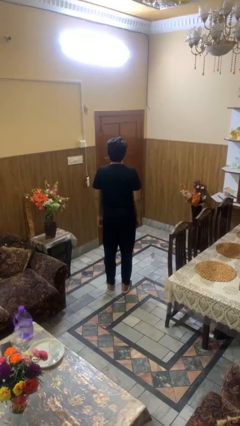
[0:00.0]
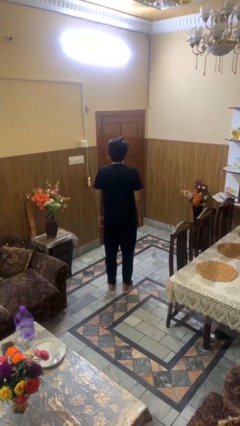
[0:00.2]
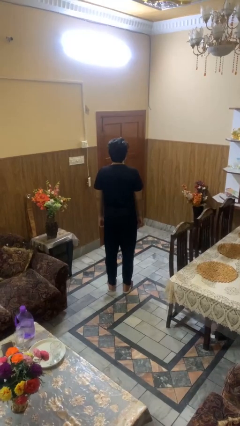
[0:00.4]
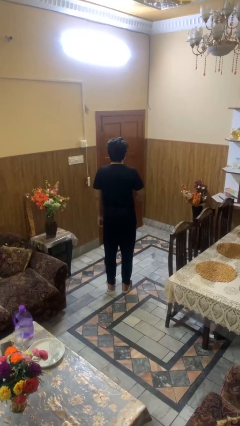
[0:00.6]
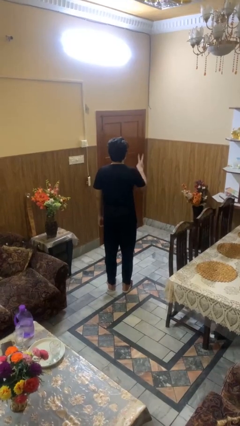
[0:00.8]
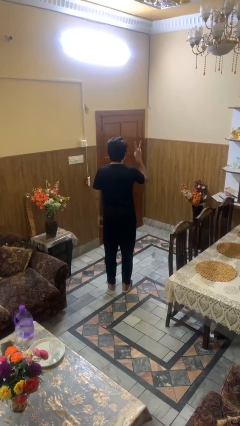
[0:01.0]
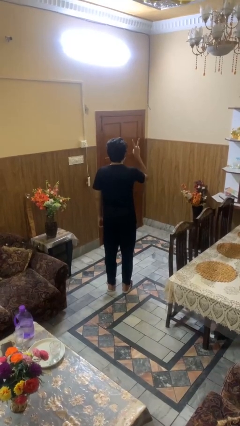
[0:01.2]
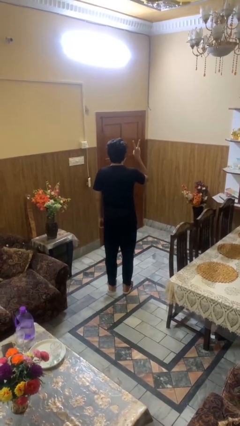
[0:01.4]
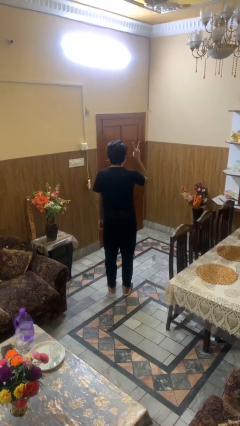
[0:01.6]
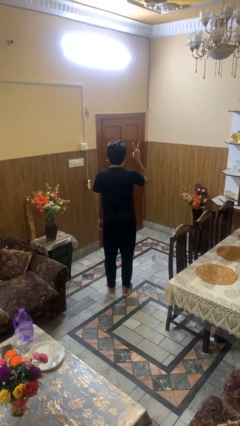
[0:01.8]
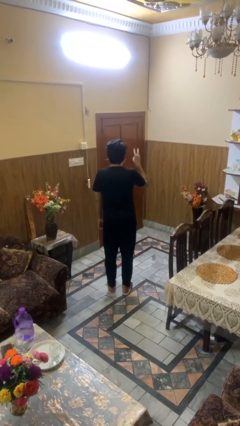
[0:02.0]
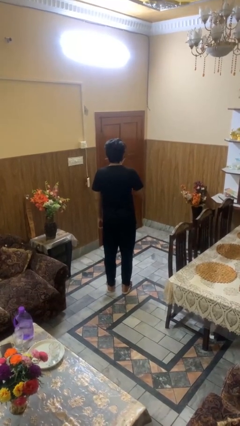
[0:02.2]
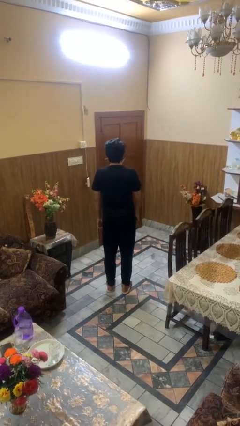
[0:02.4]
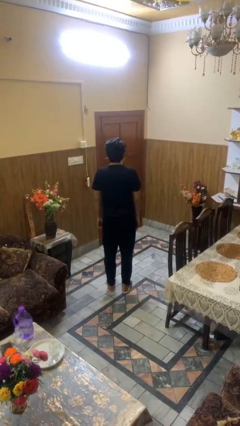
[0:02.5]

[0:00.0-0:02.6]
person gestures peace

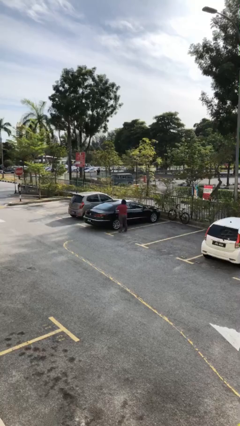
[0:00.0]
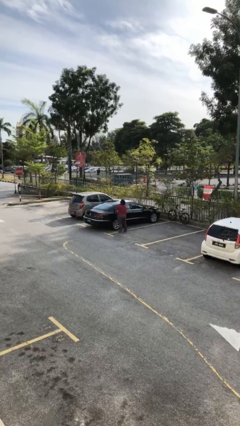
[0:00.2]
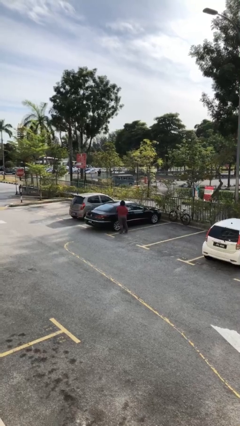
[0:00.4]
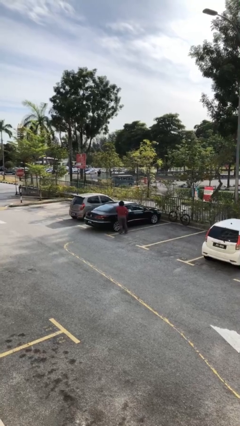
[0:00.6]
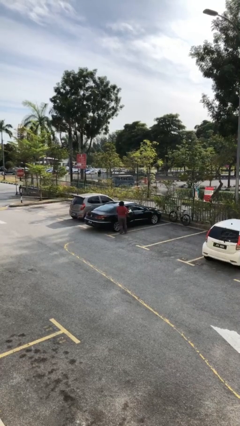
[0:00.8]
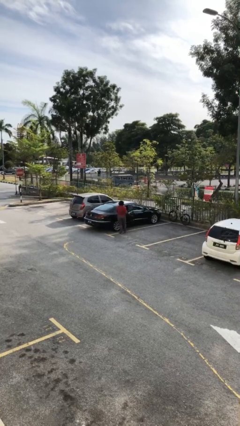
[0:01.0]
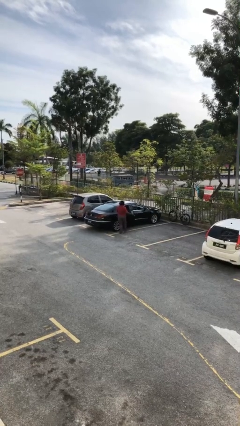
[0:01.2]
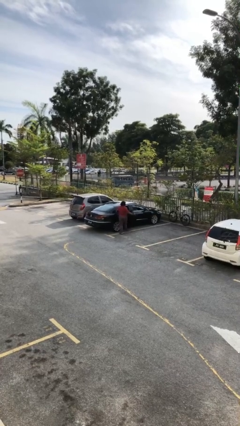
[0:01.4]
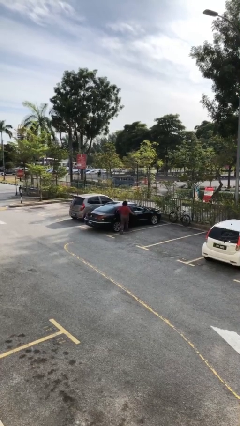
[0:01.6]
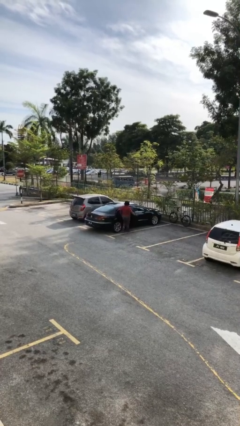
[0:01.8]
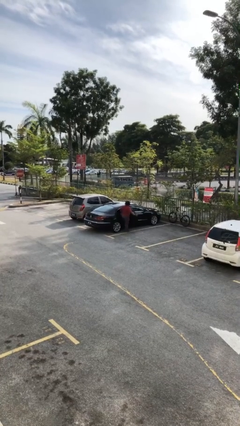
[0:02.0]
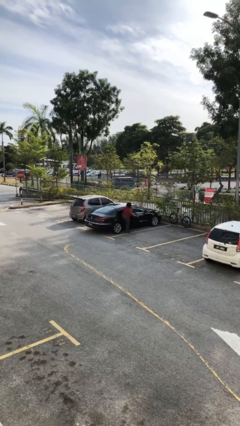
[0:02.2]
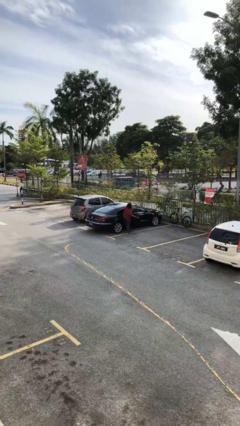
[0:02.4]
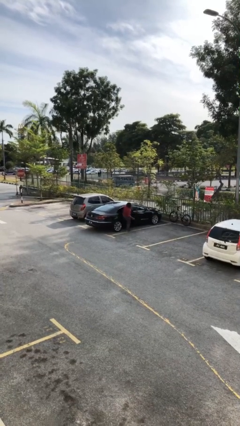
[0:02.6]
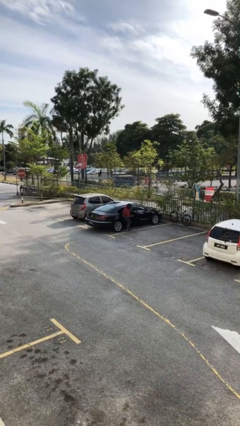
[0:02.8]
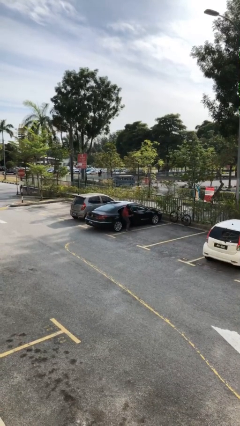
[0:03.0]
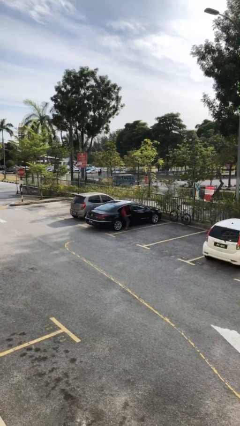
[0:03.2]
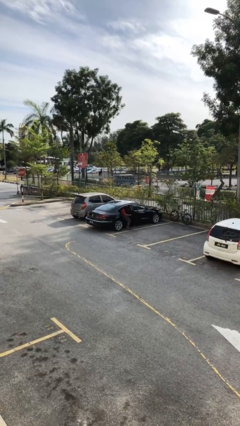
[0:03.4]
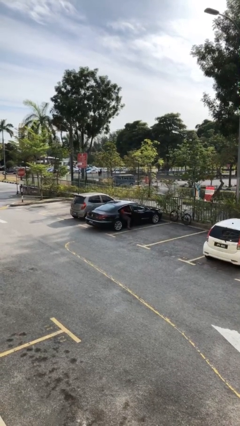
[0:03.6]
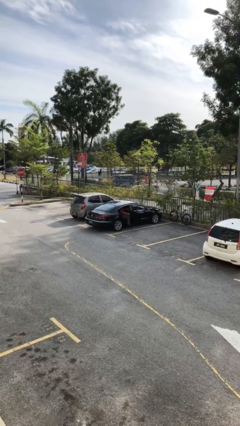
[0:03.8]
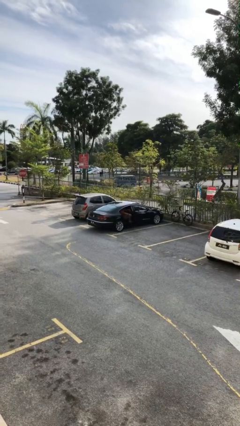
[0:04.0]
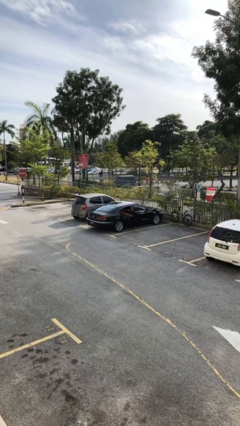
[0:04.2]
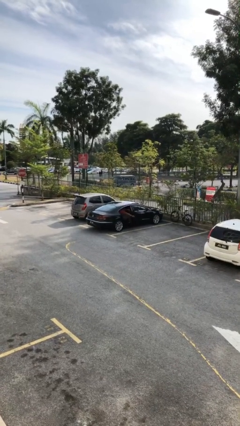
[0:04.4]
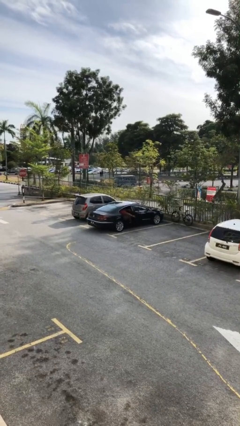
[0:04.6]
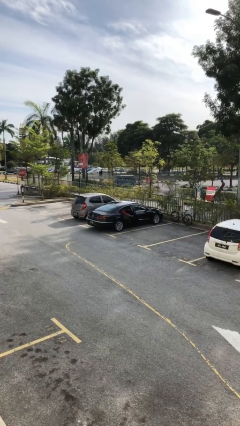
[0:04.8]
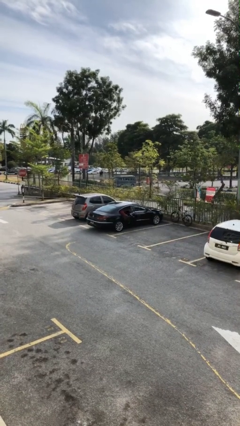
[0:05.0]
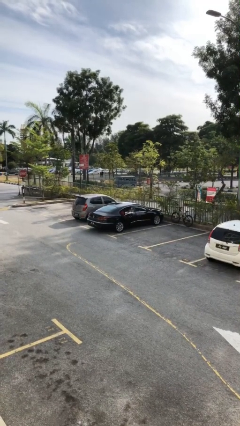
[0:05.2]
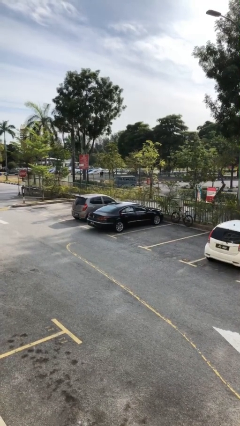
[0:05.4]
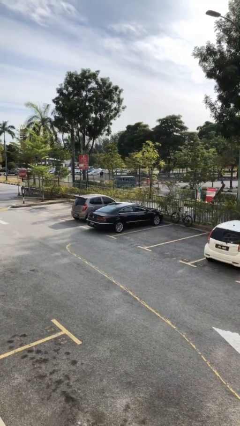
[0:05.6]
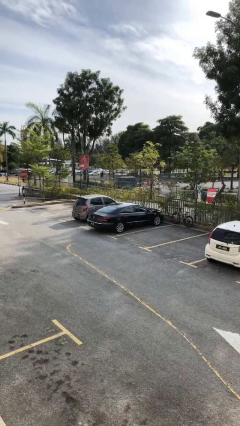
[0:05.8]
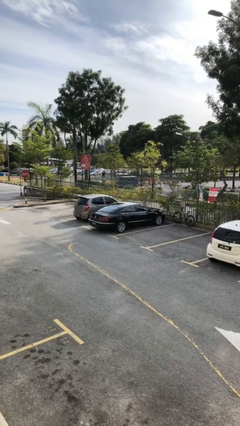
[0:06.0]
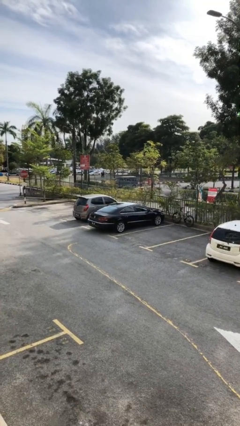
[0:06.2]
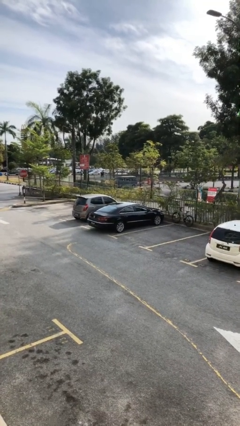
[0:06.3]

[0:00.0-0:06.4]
car picks up person

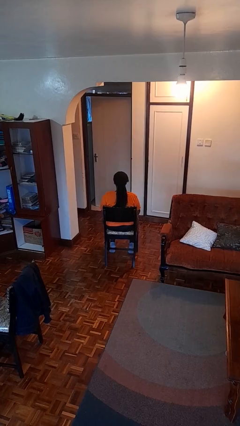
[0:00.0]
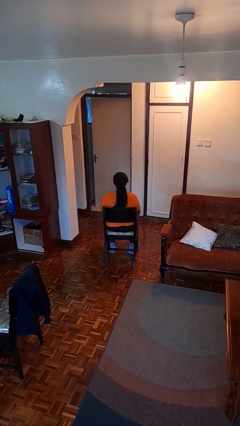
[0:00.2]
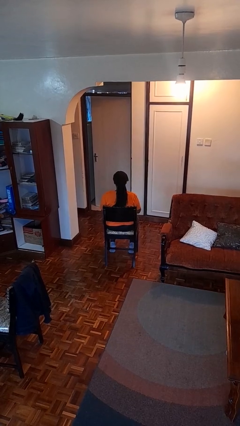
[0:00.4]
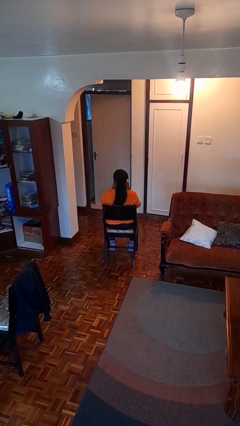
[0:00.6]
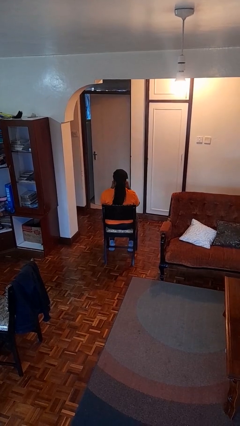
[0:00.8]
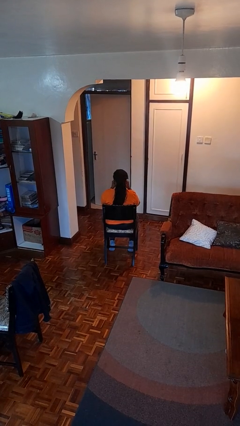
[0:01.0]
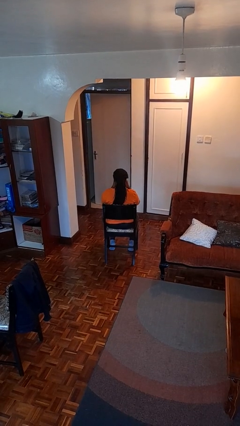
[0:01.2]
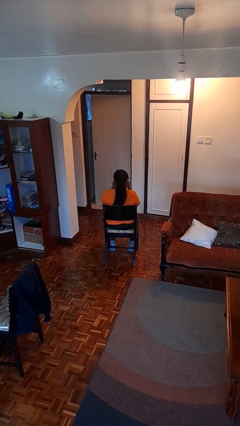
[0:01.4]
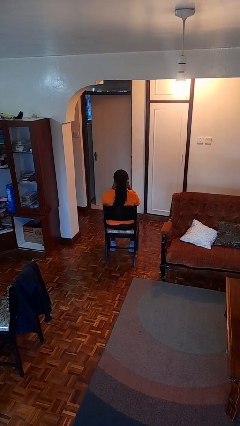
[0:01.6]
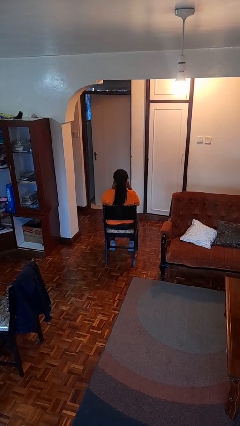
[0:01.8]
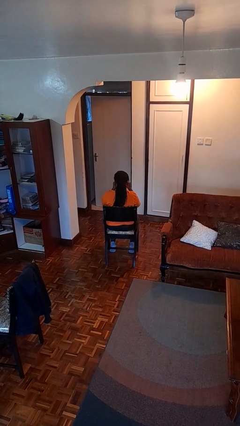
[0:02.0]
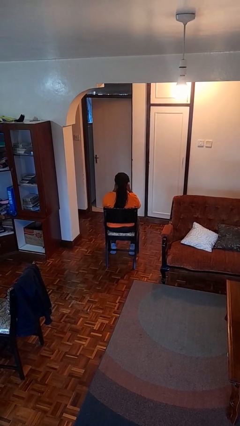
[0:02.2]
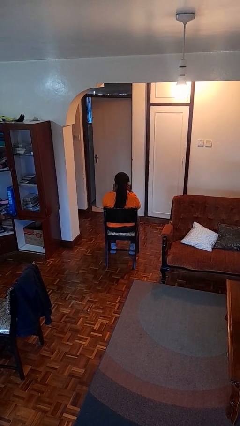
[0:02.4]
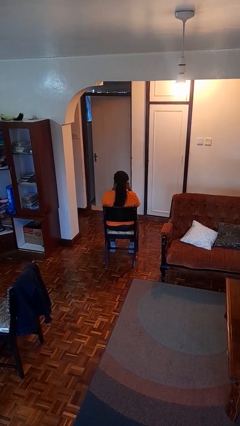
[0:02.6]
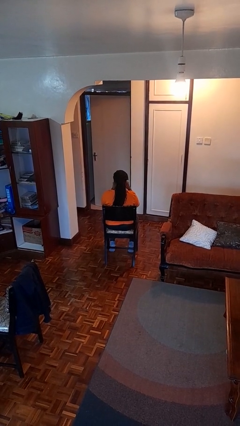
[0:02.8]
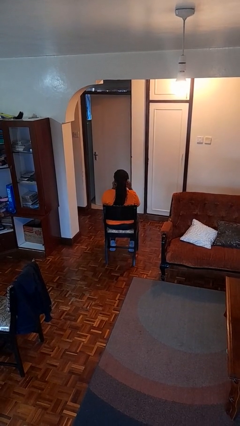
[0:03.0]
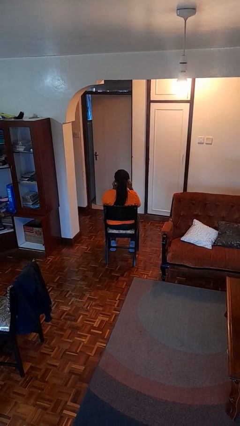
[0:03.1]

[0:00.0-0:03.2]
person rubs eyes

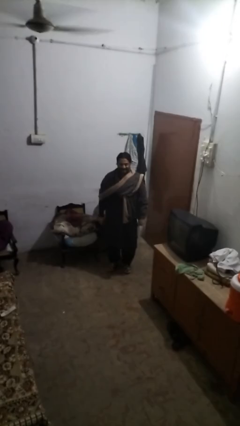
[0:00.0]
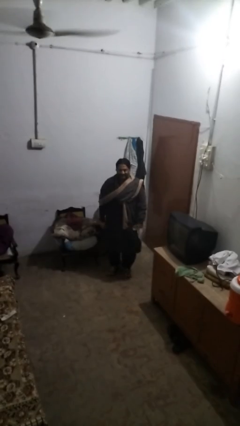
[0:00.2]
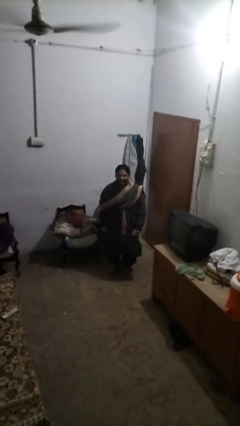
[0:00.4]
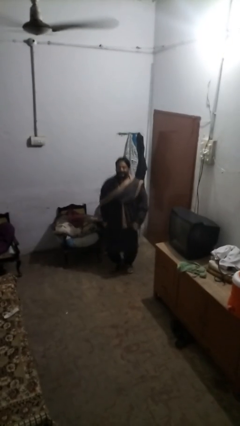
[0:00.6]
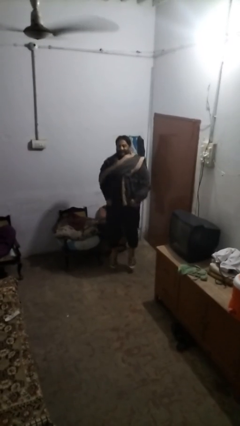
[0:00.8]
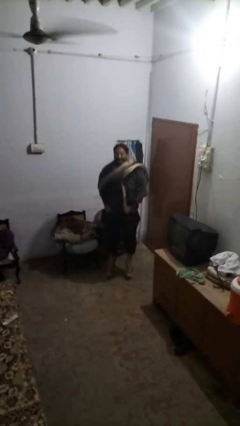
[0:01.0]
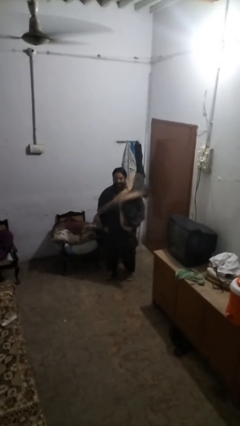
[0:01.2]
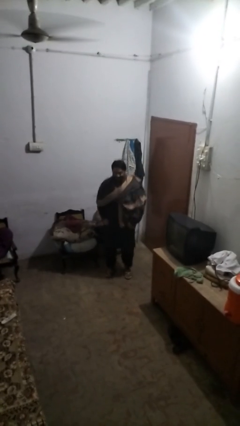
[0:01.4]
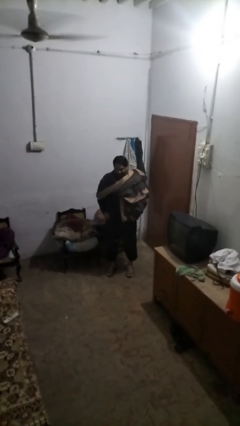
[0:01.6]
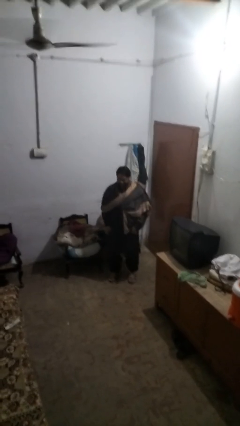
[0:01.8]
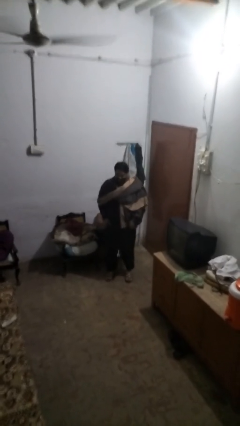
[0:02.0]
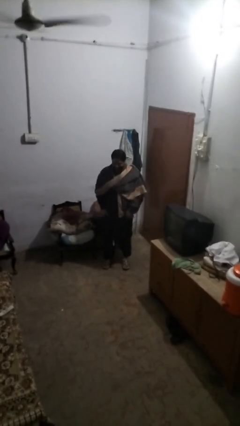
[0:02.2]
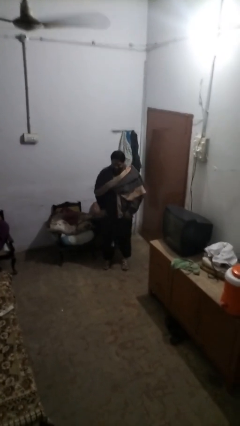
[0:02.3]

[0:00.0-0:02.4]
person jumps

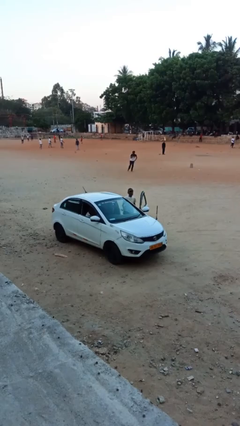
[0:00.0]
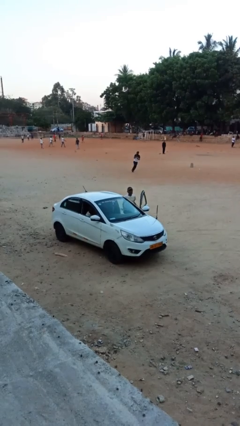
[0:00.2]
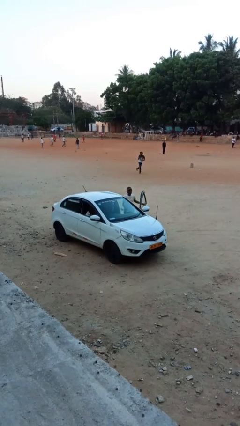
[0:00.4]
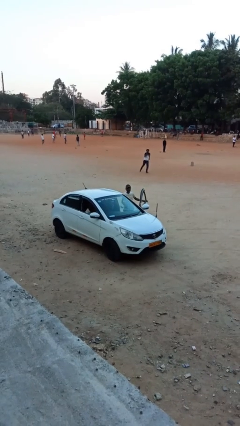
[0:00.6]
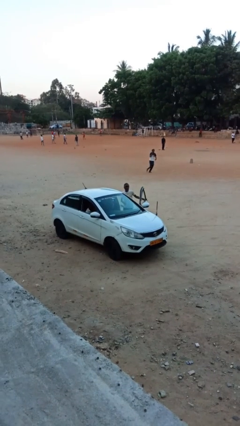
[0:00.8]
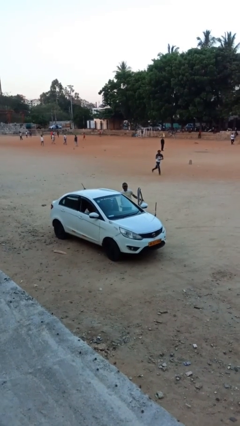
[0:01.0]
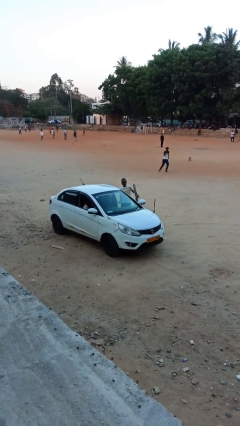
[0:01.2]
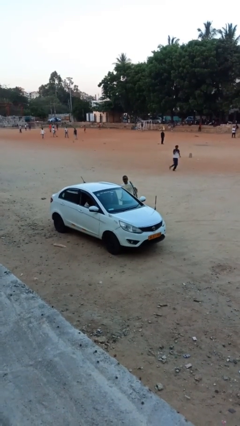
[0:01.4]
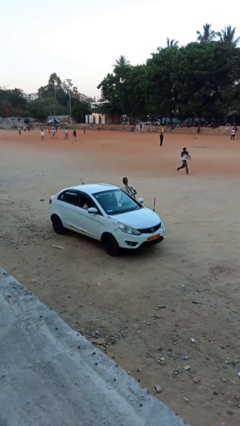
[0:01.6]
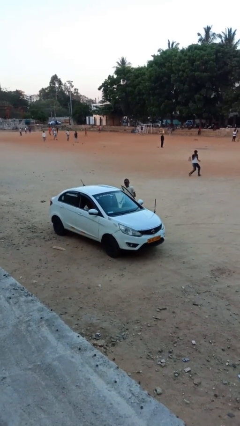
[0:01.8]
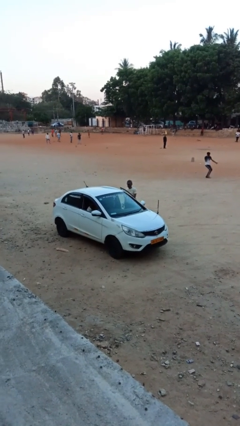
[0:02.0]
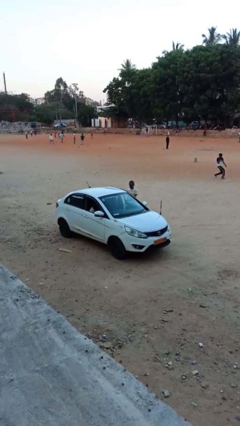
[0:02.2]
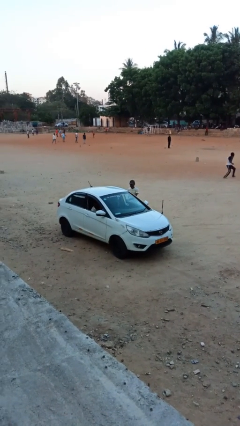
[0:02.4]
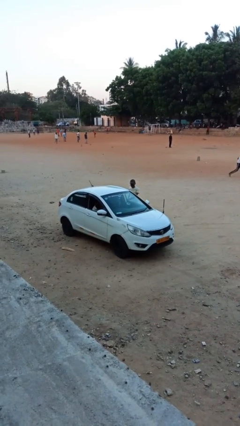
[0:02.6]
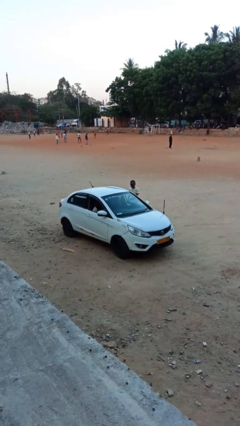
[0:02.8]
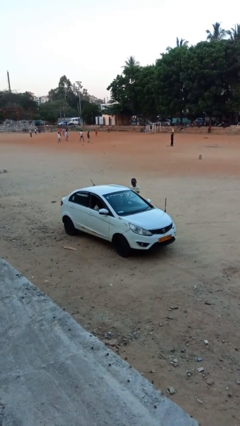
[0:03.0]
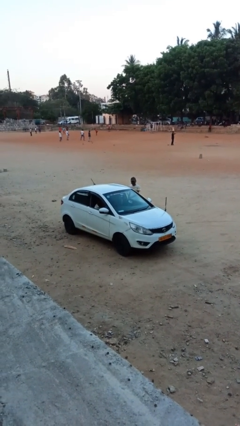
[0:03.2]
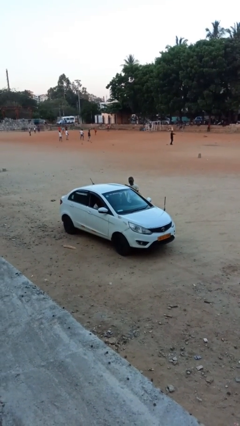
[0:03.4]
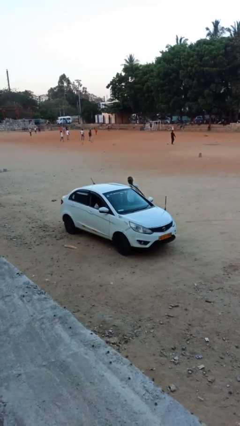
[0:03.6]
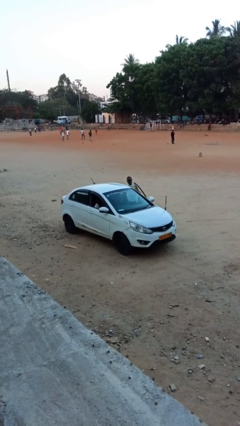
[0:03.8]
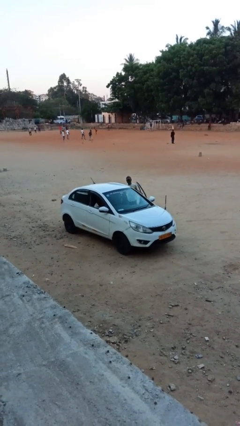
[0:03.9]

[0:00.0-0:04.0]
car drops off person
